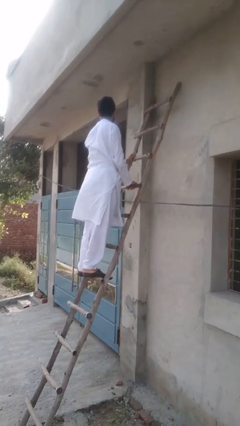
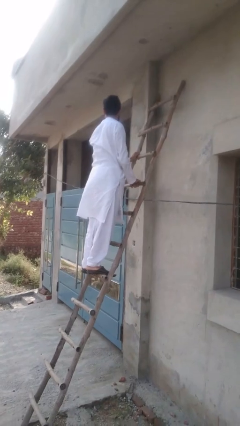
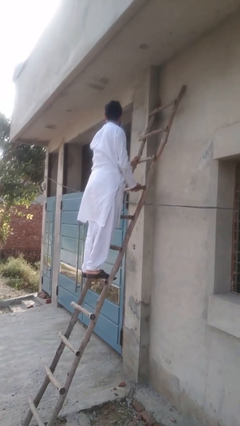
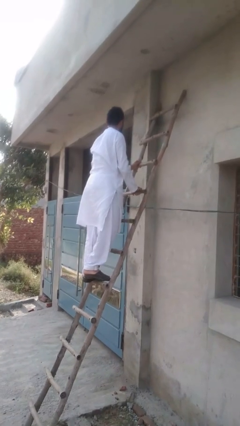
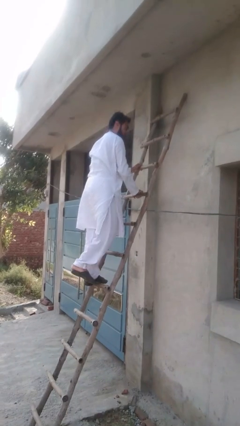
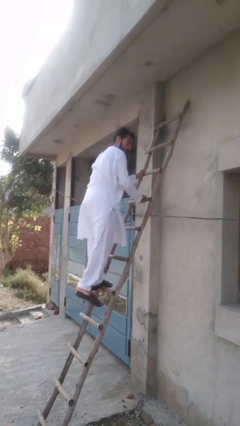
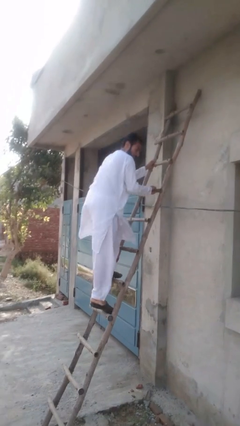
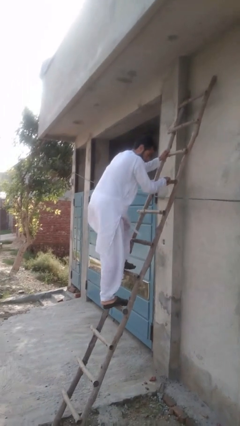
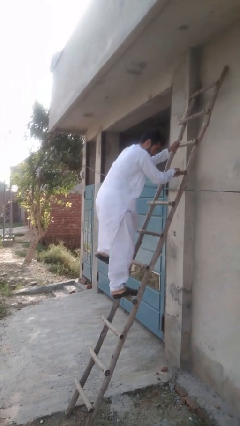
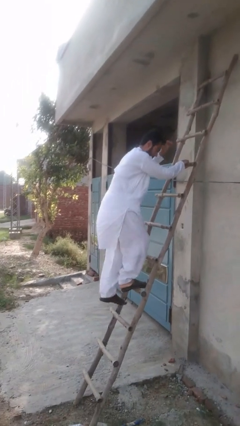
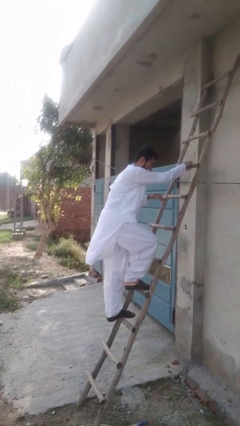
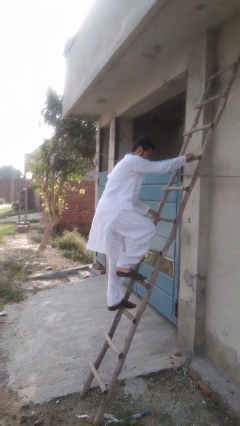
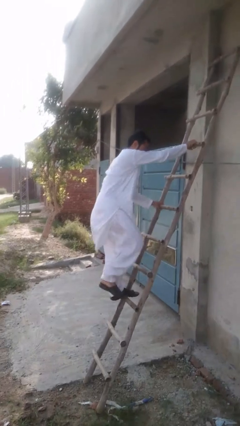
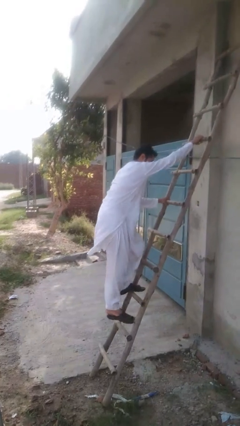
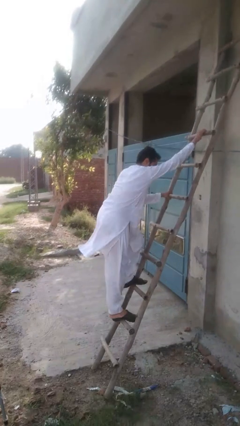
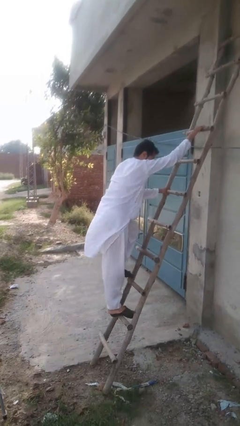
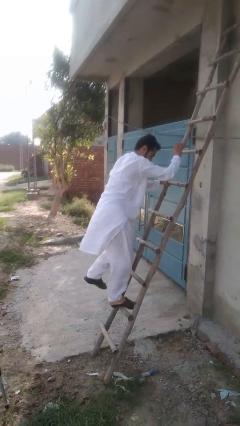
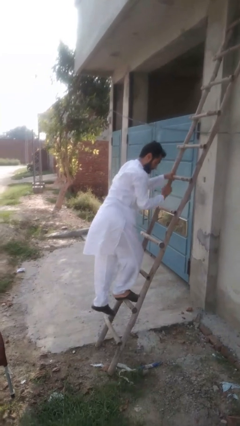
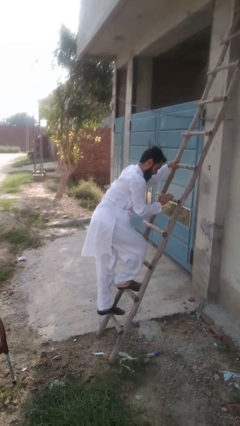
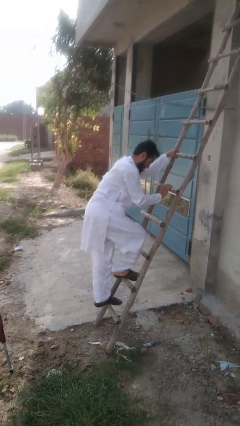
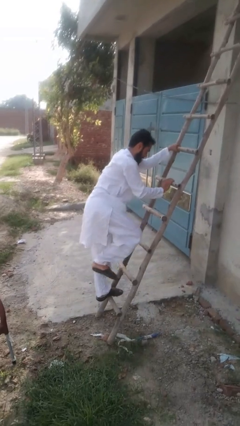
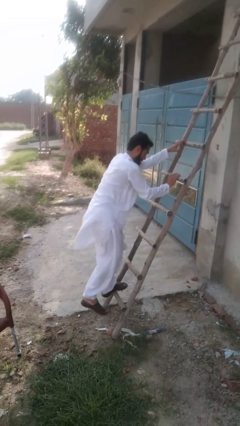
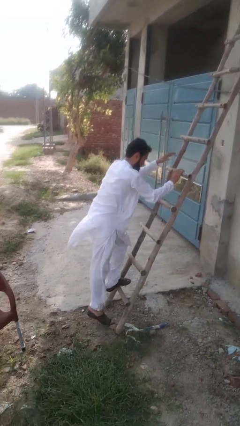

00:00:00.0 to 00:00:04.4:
person climbs down stairs

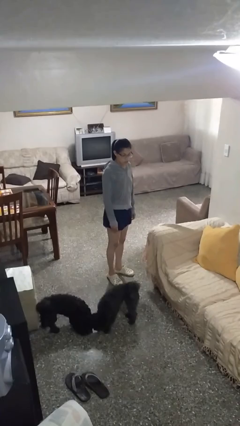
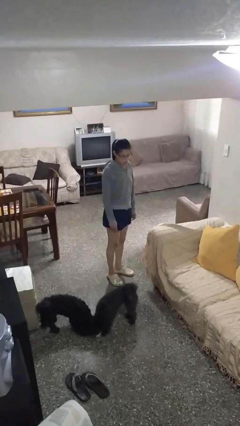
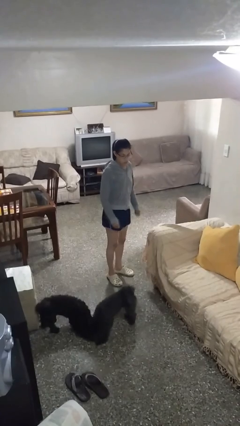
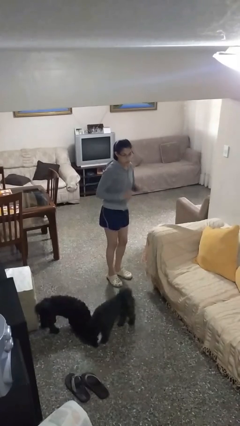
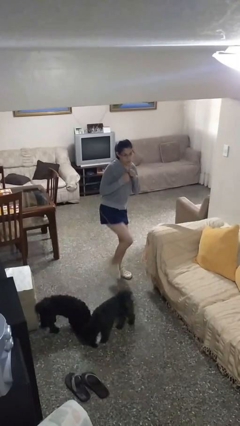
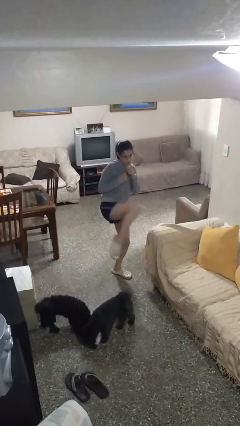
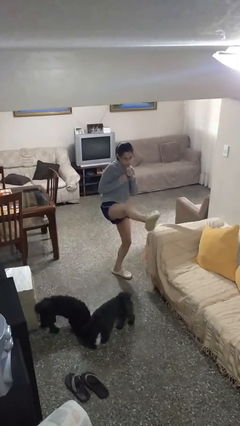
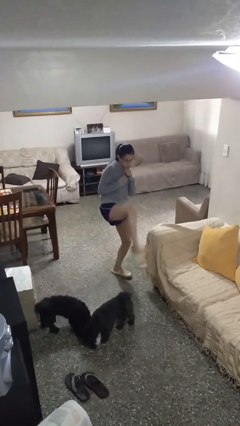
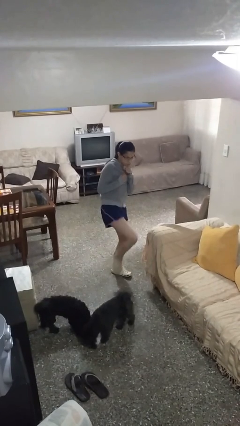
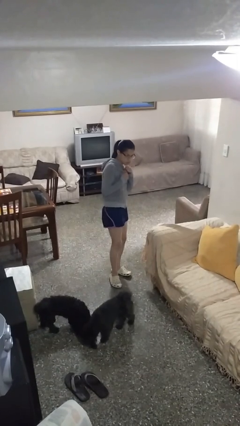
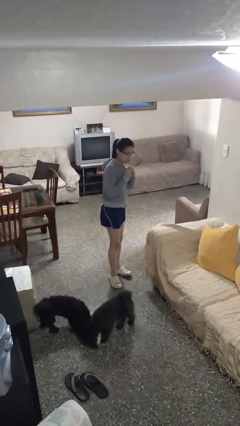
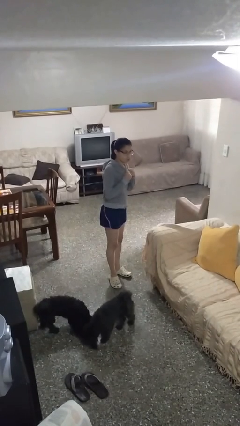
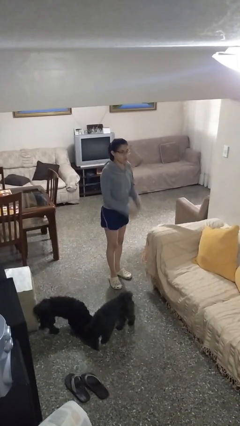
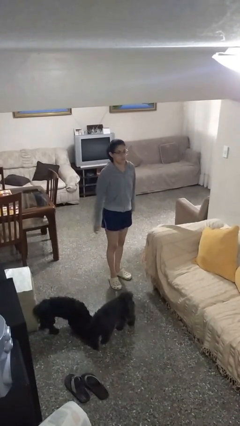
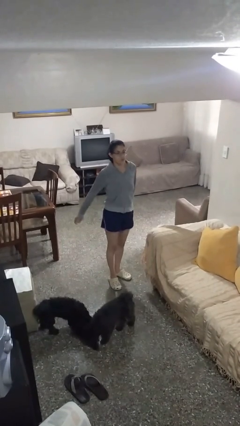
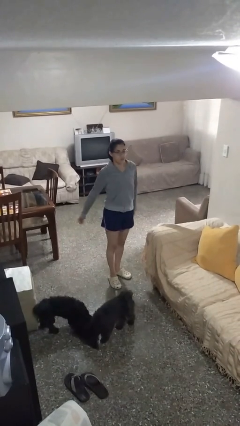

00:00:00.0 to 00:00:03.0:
person karate kicks

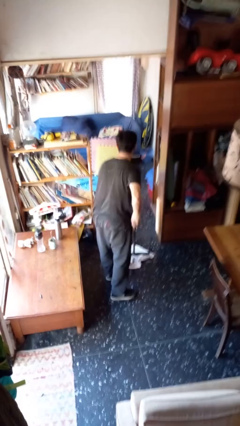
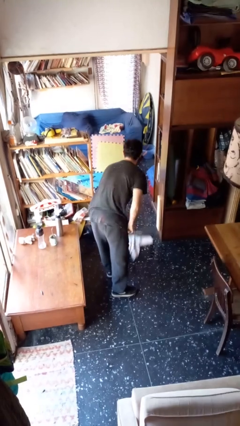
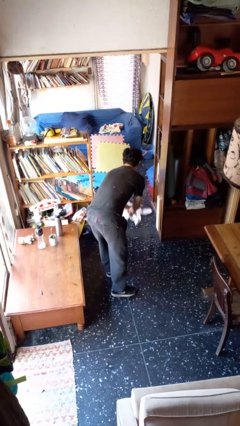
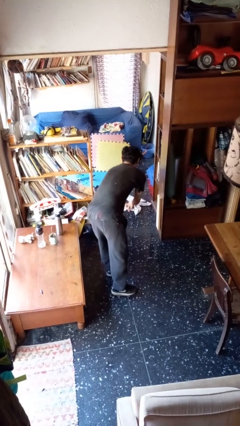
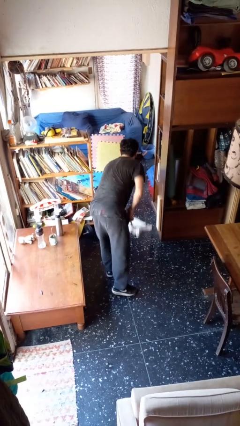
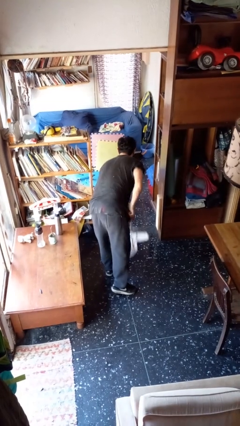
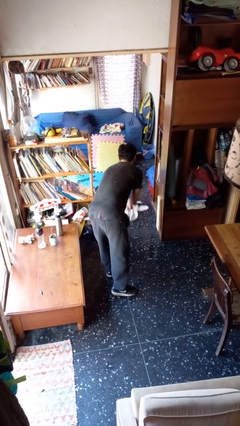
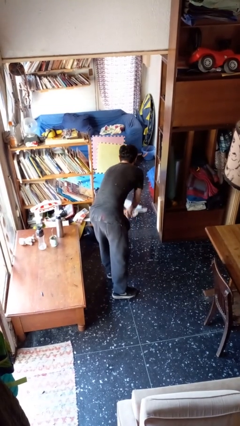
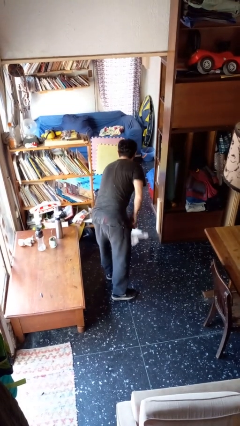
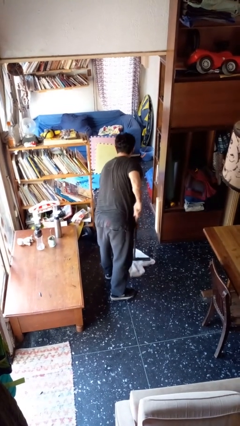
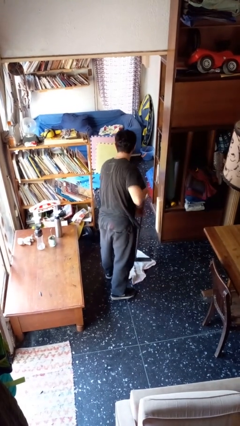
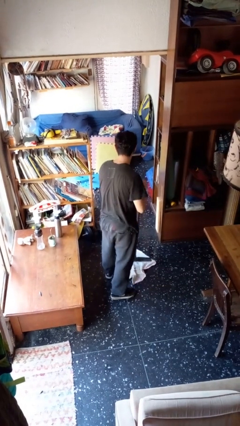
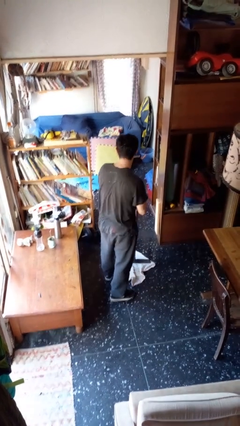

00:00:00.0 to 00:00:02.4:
person mops

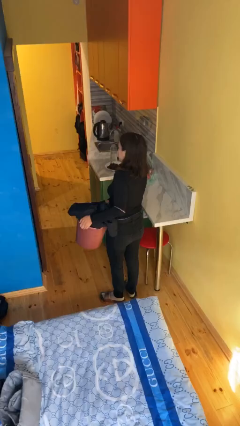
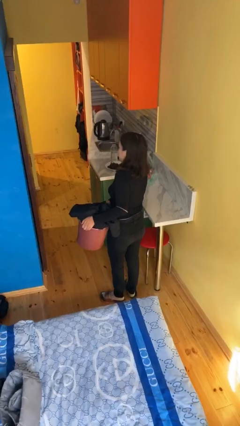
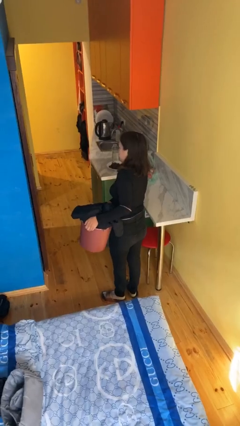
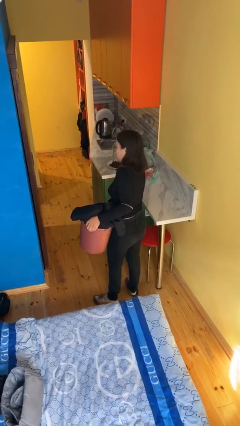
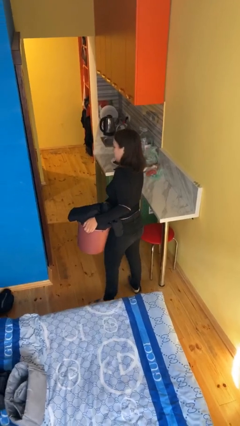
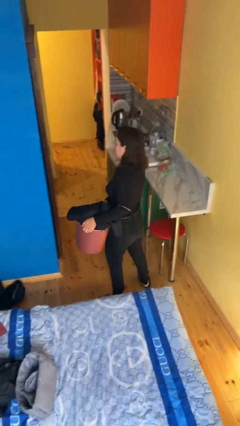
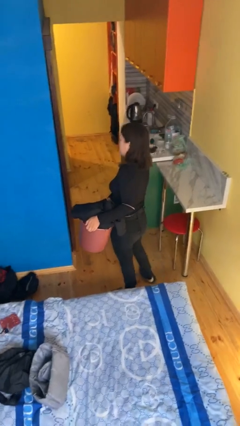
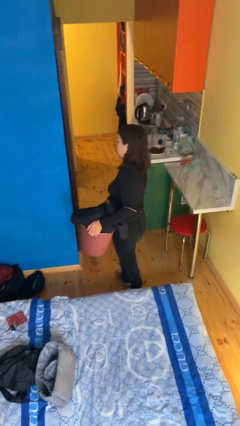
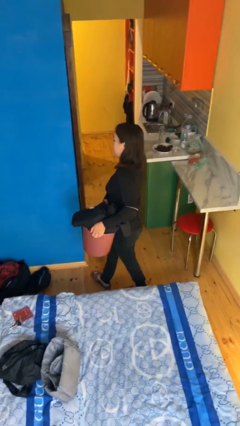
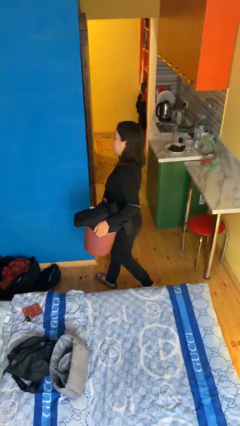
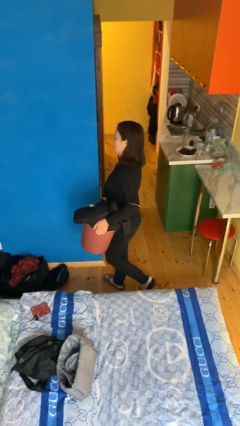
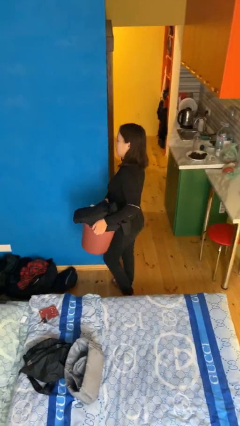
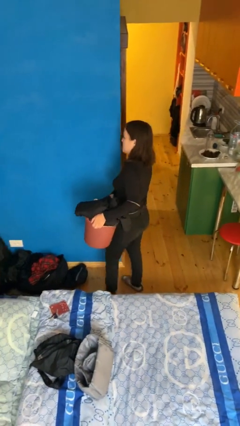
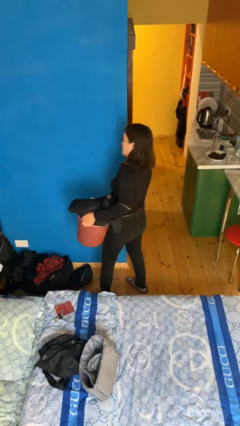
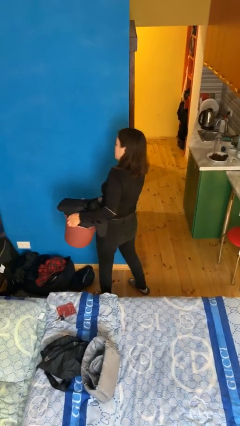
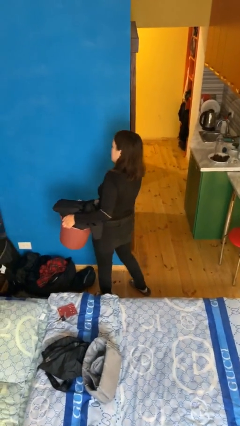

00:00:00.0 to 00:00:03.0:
person carries laundry basket

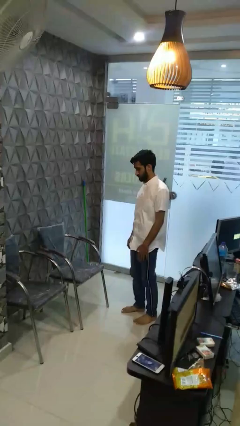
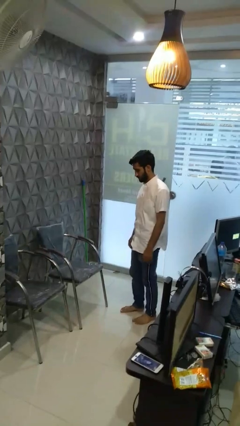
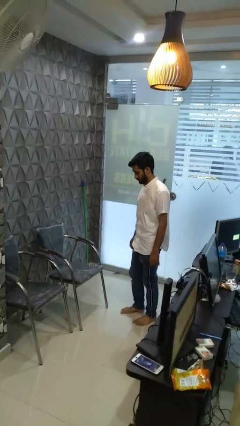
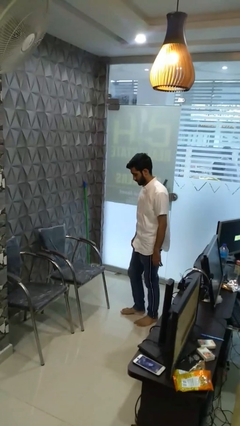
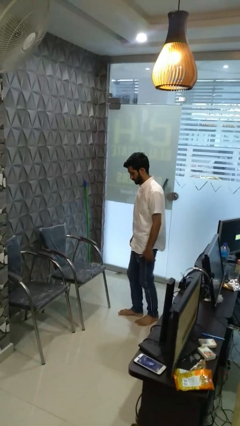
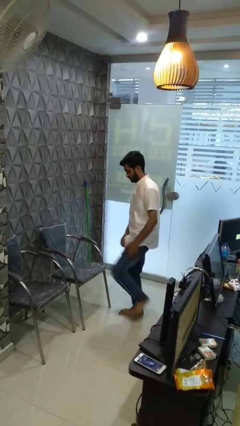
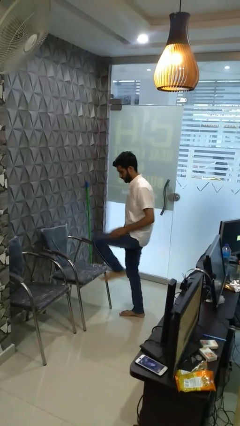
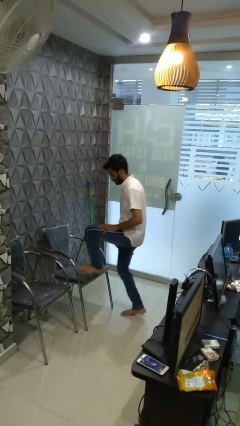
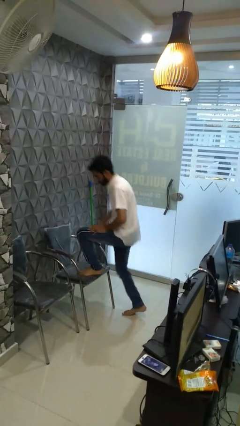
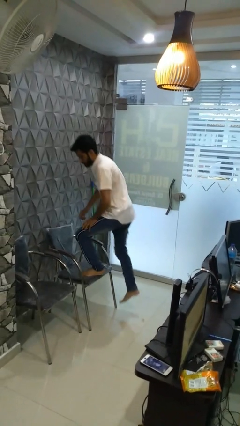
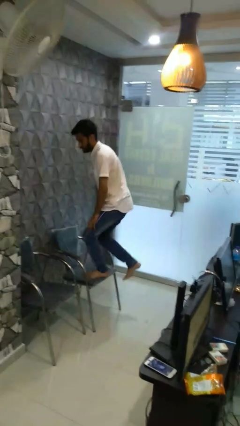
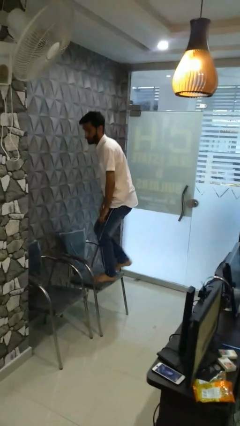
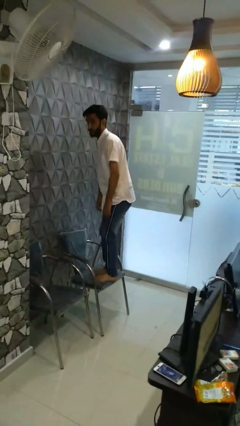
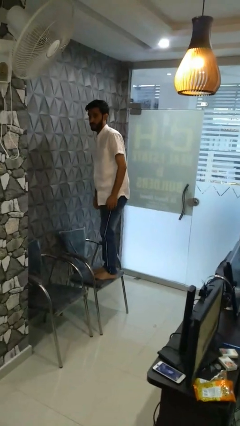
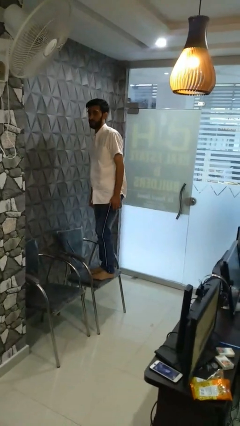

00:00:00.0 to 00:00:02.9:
person climbs on chair

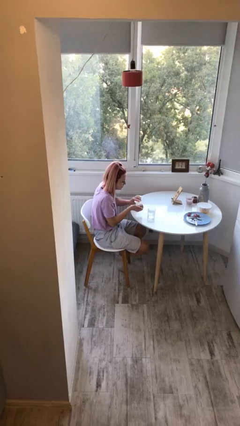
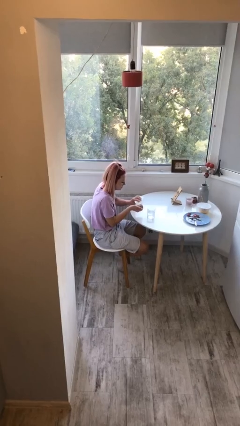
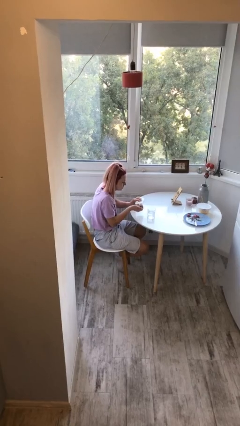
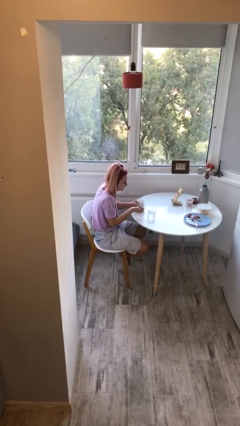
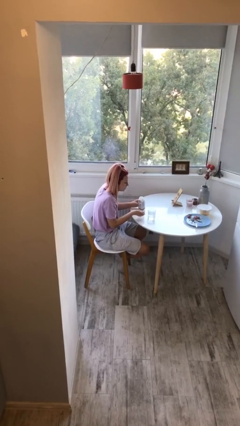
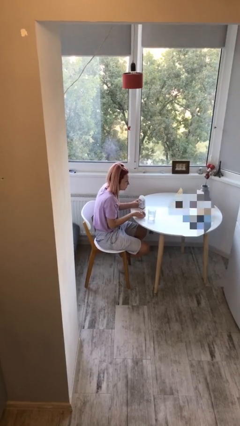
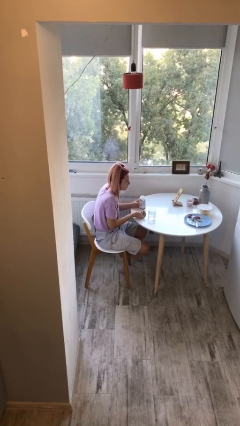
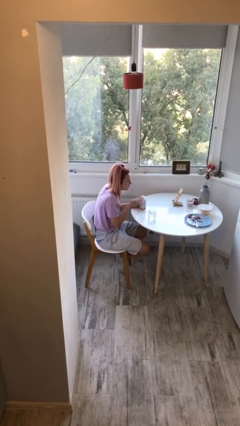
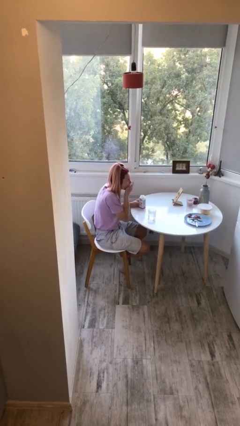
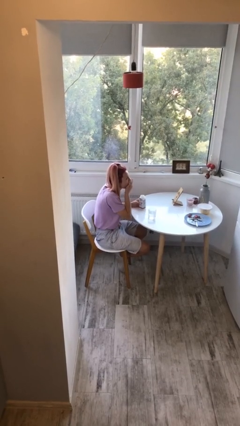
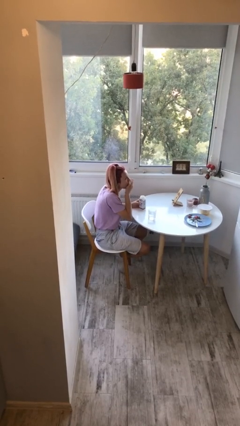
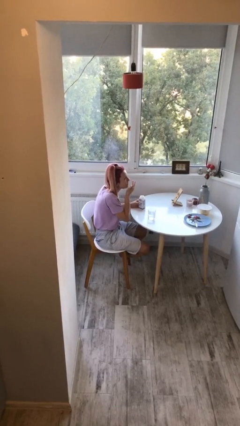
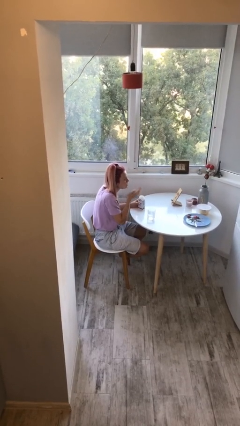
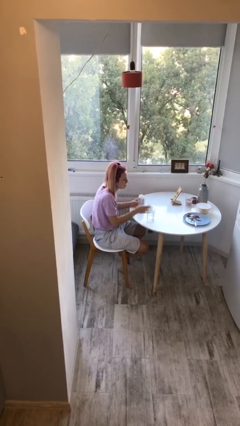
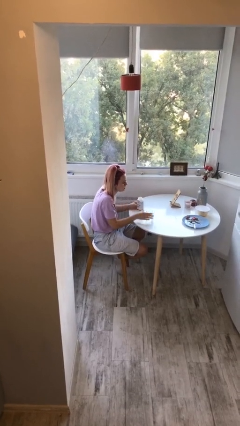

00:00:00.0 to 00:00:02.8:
person takes medicine pills
